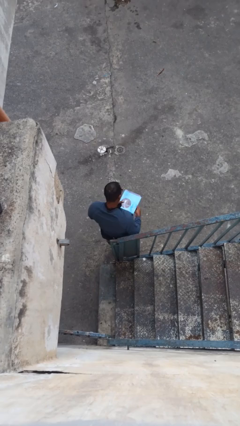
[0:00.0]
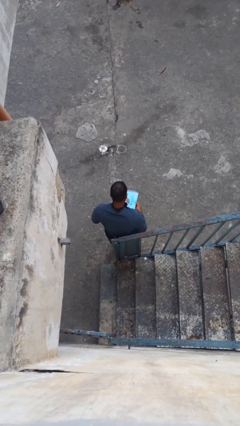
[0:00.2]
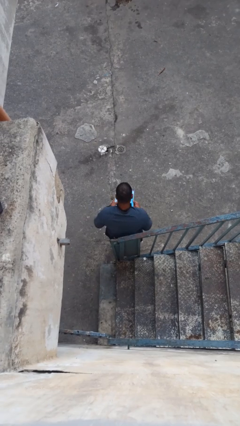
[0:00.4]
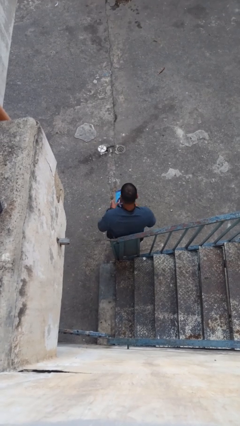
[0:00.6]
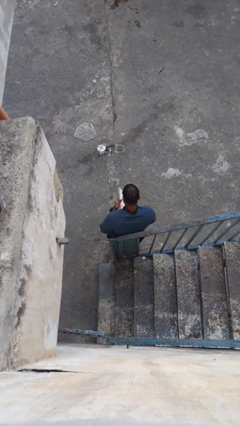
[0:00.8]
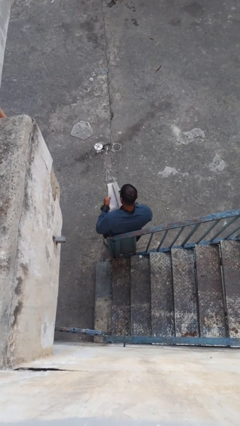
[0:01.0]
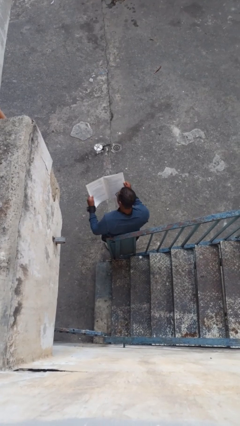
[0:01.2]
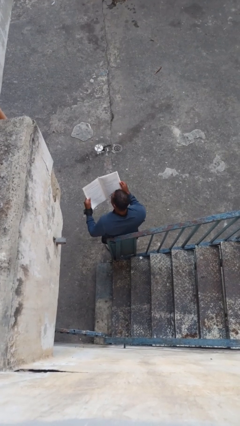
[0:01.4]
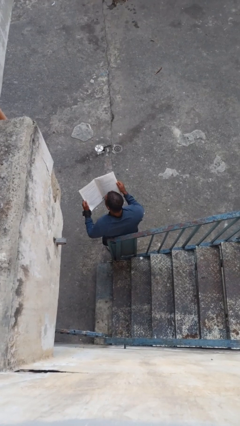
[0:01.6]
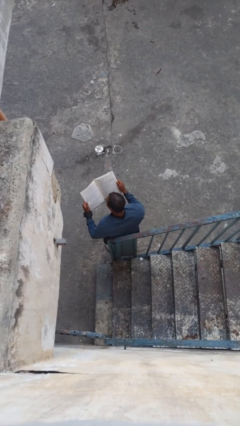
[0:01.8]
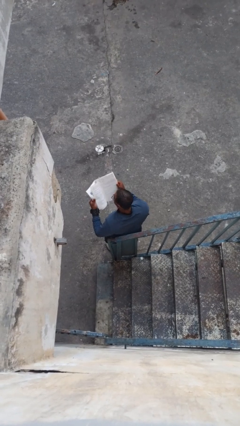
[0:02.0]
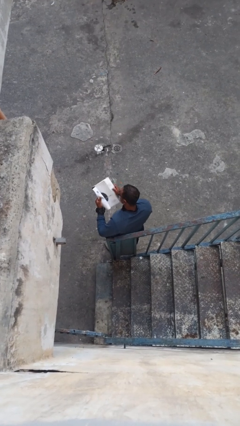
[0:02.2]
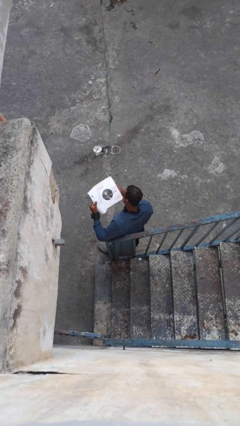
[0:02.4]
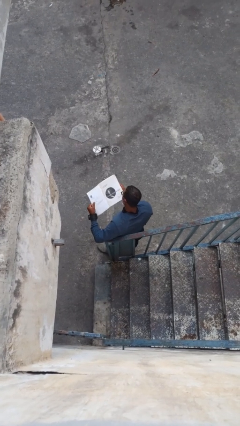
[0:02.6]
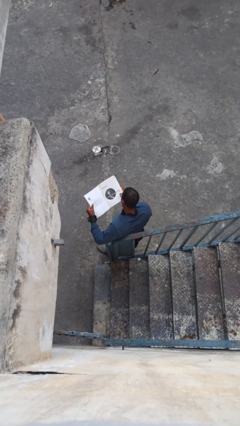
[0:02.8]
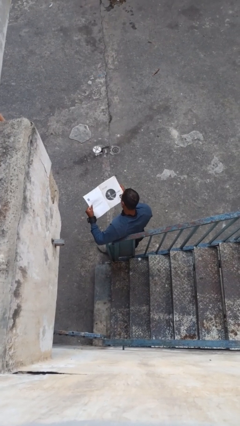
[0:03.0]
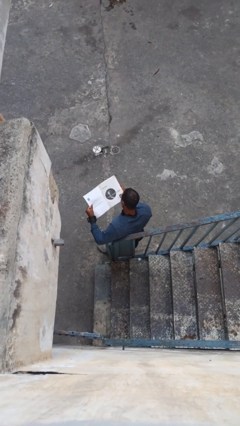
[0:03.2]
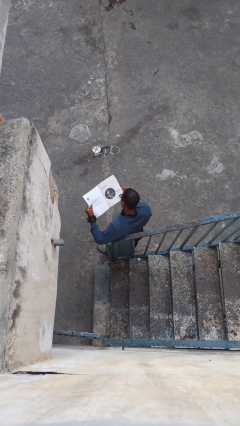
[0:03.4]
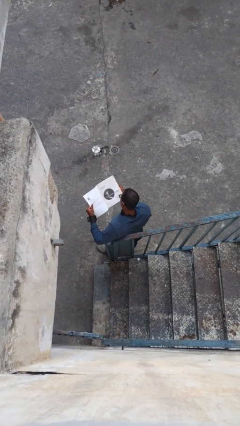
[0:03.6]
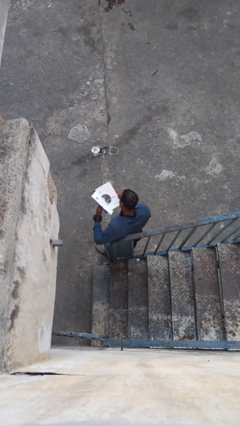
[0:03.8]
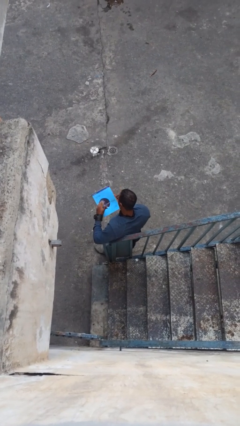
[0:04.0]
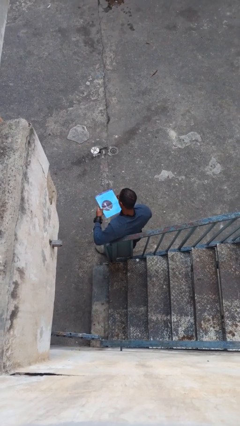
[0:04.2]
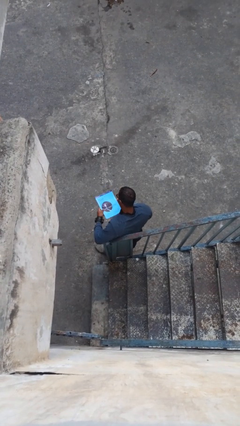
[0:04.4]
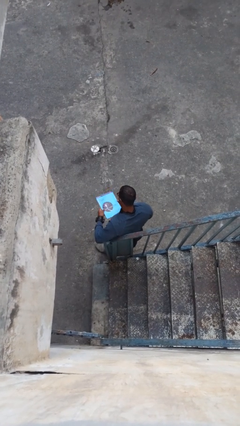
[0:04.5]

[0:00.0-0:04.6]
person reads document

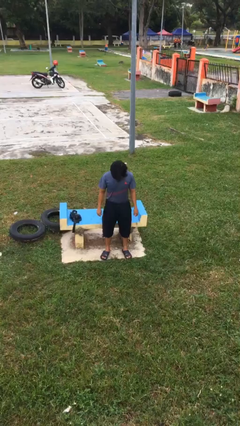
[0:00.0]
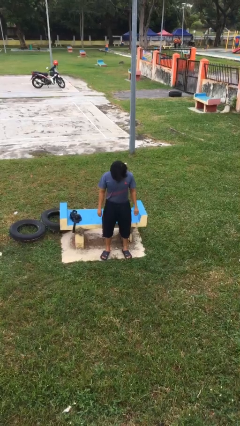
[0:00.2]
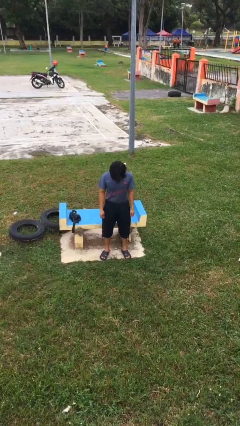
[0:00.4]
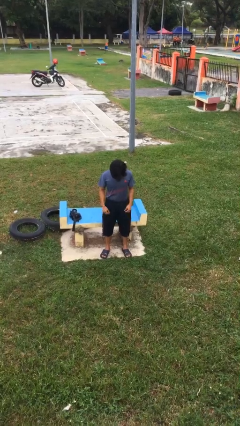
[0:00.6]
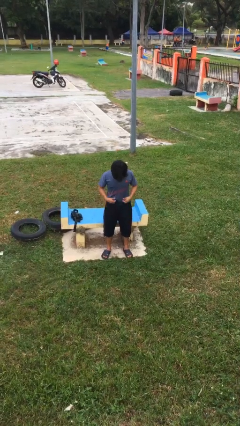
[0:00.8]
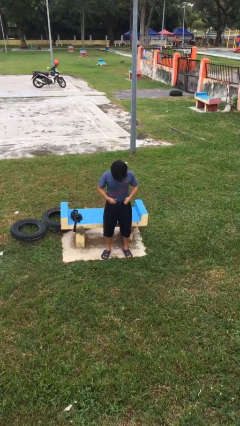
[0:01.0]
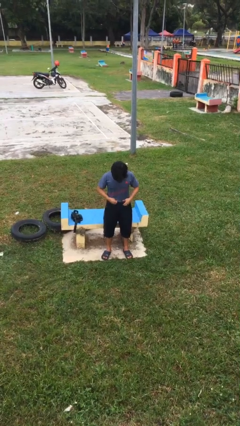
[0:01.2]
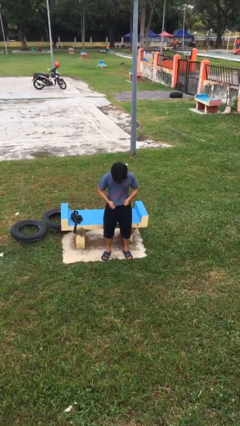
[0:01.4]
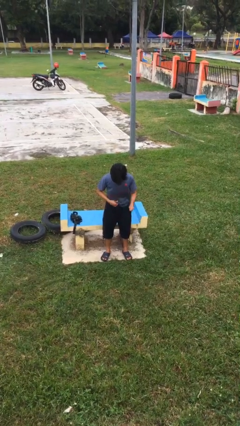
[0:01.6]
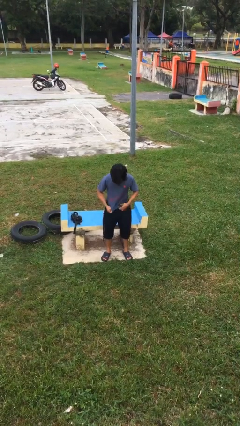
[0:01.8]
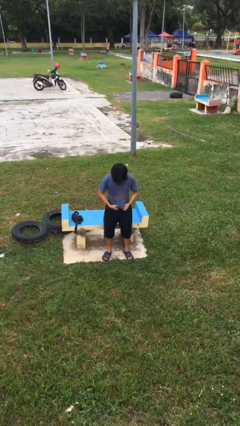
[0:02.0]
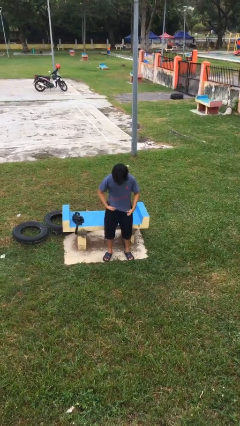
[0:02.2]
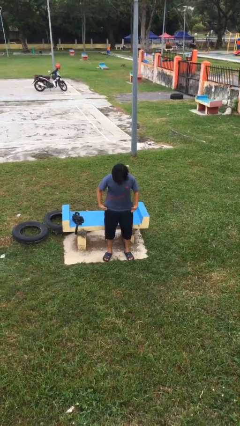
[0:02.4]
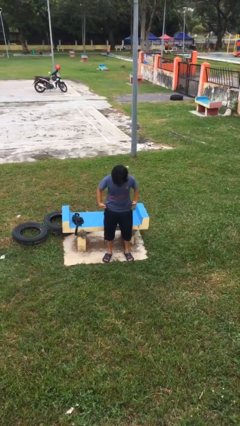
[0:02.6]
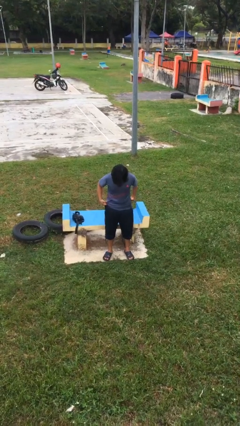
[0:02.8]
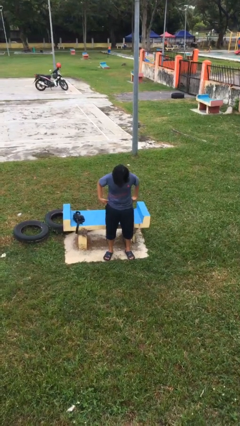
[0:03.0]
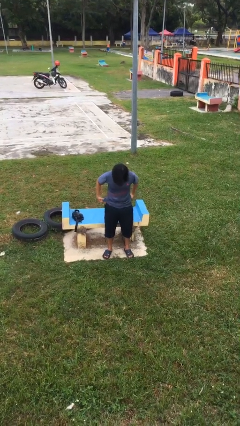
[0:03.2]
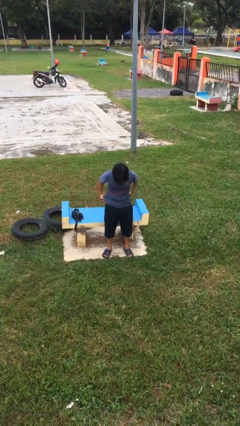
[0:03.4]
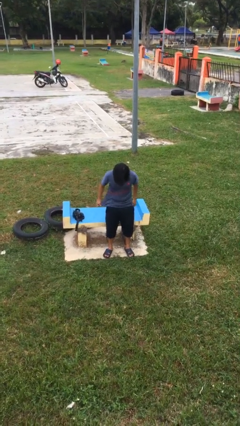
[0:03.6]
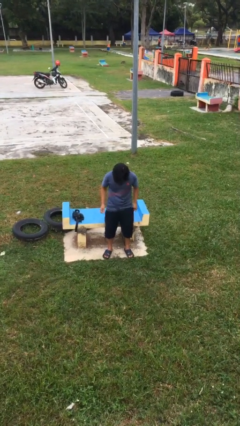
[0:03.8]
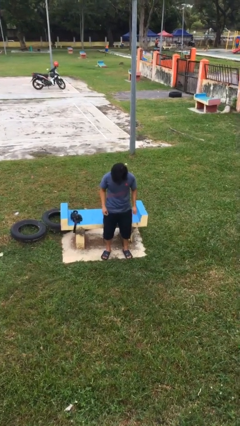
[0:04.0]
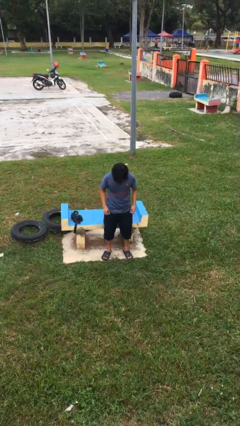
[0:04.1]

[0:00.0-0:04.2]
person untucks shirt

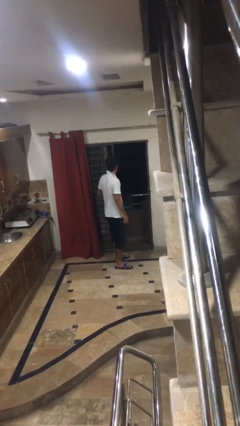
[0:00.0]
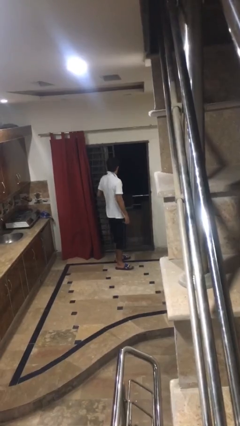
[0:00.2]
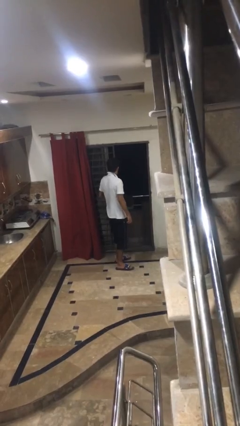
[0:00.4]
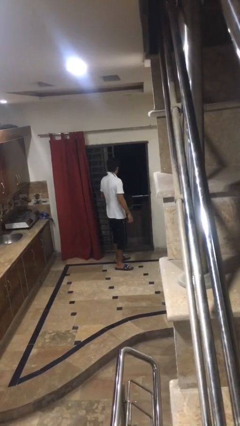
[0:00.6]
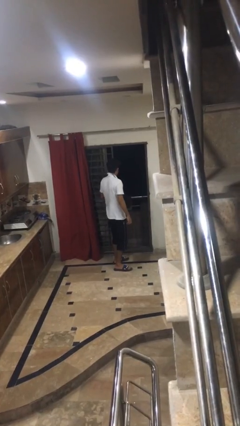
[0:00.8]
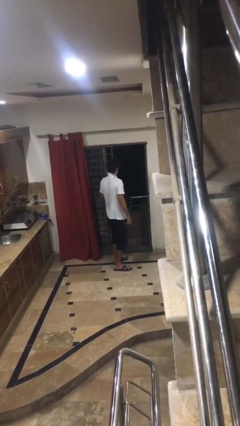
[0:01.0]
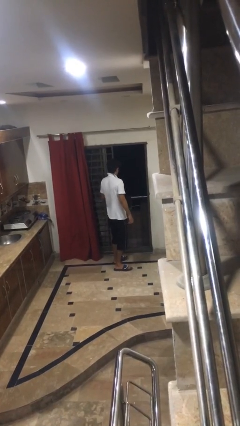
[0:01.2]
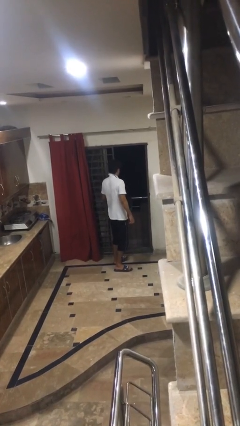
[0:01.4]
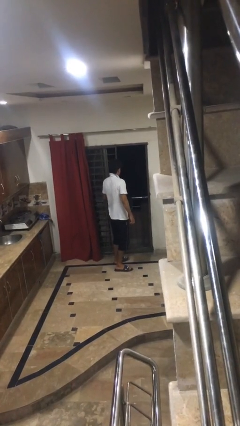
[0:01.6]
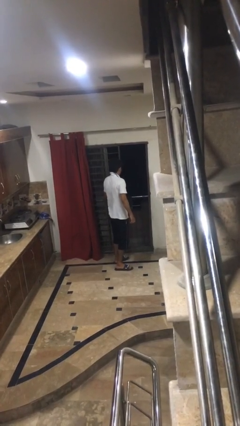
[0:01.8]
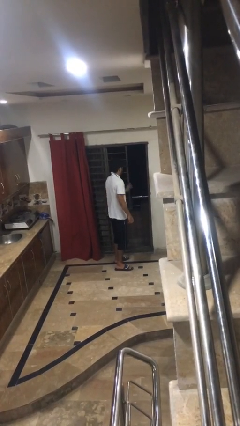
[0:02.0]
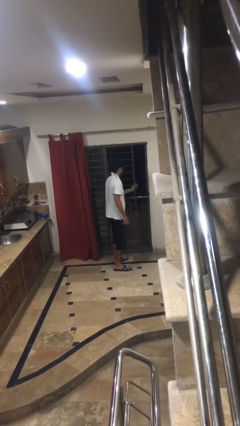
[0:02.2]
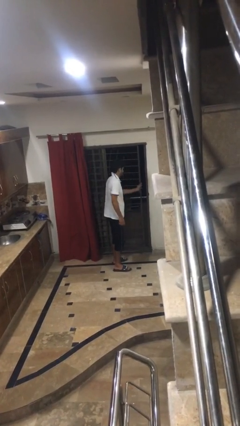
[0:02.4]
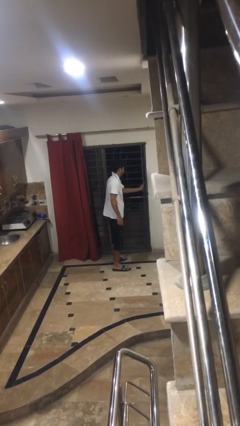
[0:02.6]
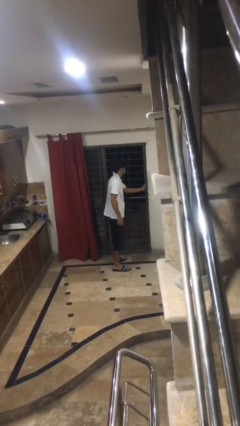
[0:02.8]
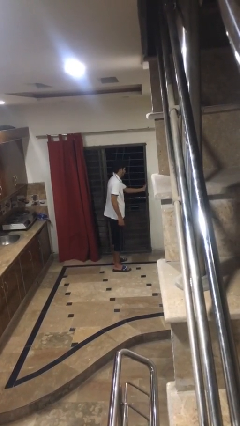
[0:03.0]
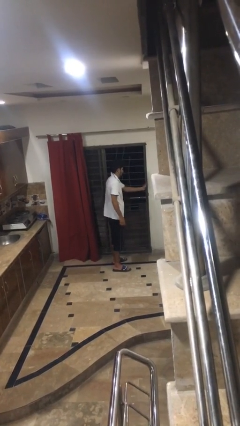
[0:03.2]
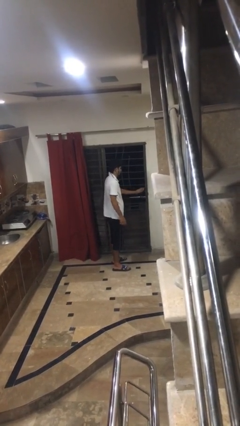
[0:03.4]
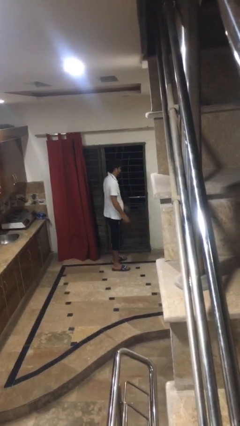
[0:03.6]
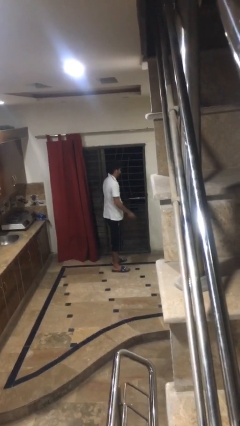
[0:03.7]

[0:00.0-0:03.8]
person closes facility door

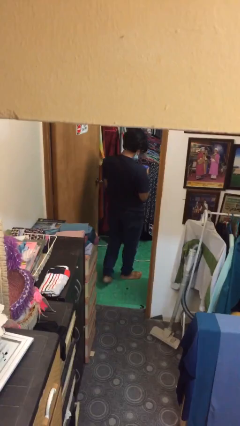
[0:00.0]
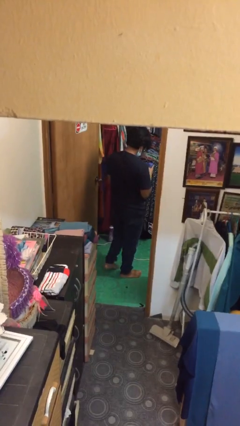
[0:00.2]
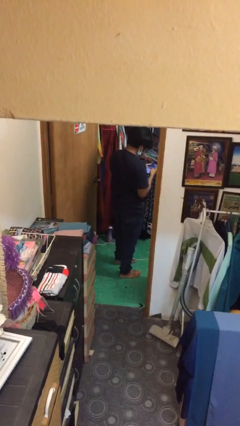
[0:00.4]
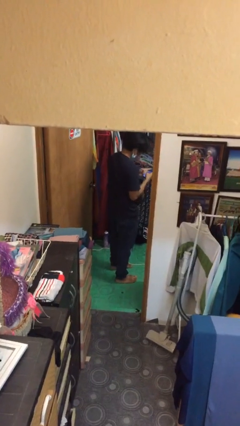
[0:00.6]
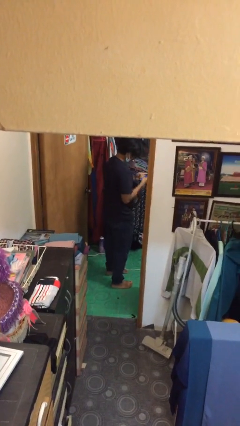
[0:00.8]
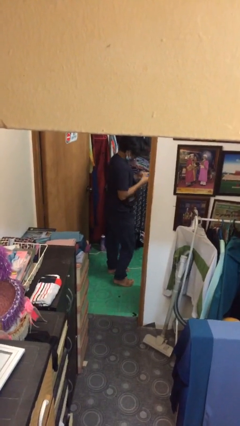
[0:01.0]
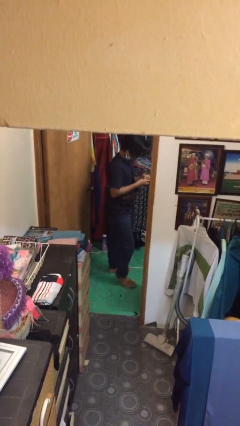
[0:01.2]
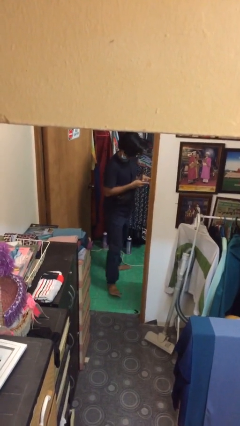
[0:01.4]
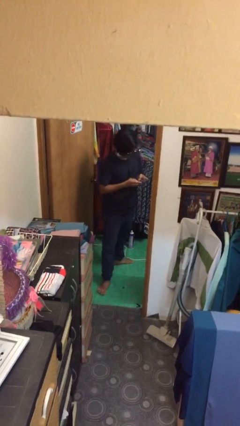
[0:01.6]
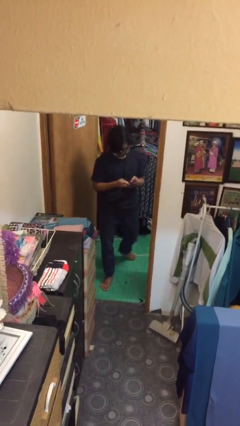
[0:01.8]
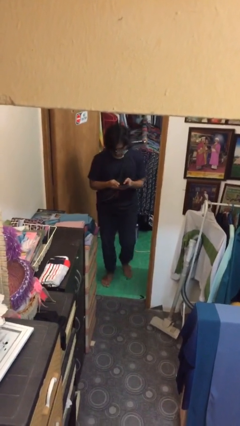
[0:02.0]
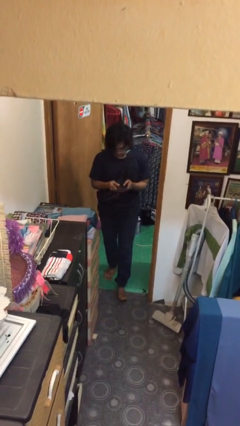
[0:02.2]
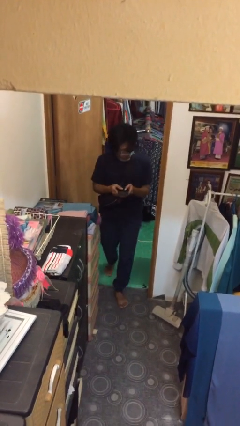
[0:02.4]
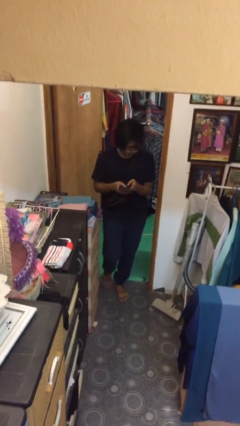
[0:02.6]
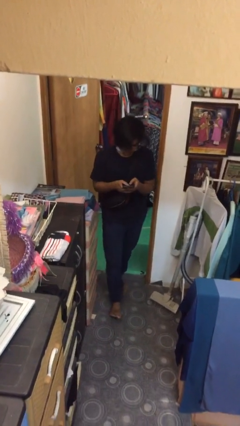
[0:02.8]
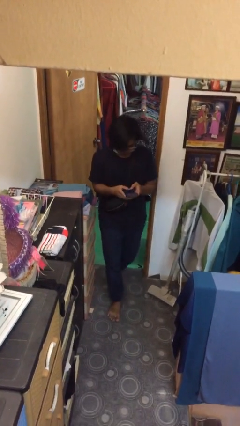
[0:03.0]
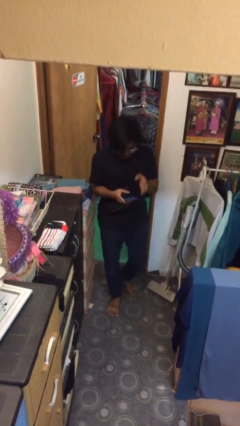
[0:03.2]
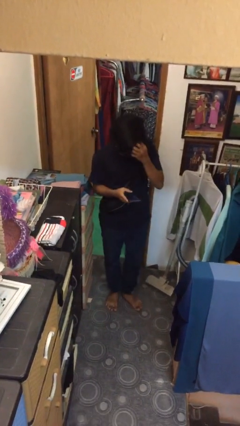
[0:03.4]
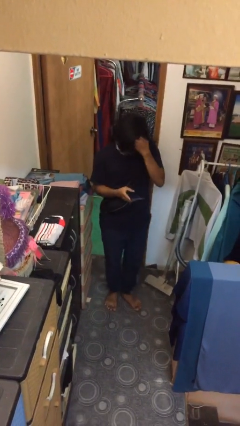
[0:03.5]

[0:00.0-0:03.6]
person enters scene through structure

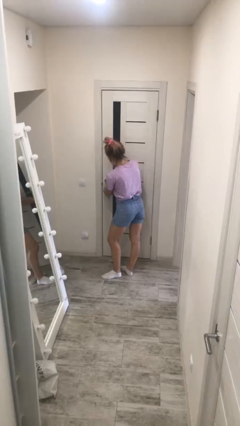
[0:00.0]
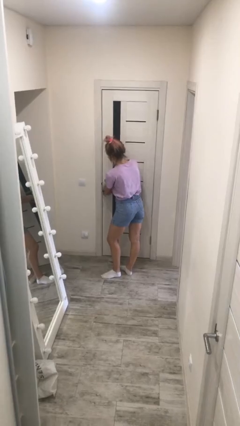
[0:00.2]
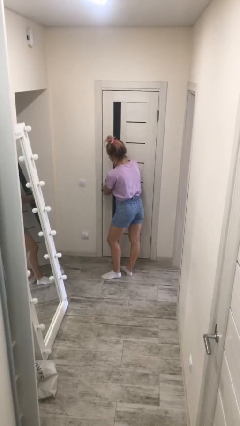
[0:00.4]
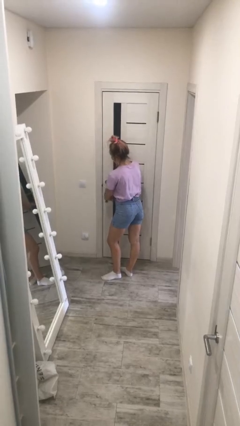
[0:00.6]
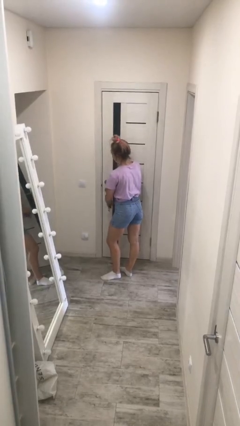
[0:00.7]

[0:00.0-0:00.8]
person locks door with keys

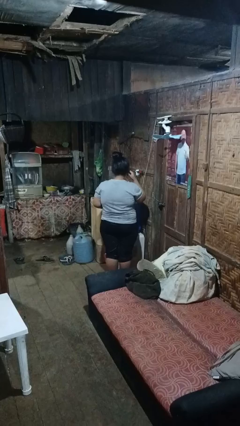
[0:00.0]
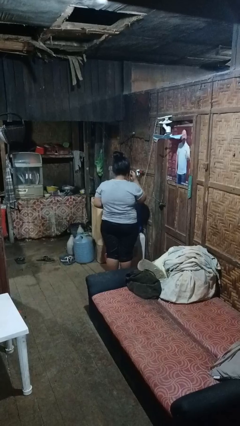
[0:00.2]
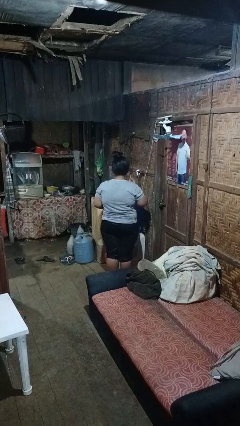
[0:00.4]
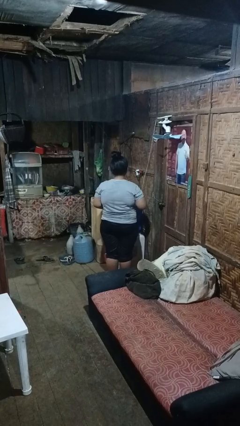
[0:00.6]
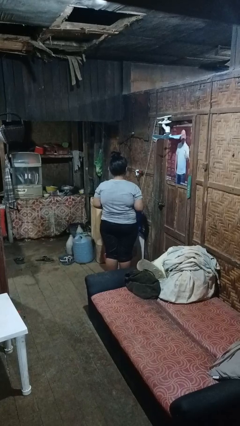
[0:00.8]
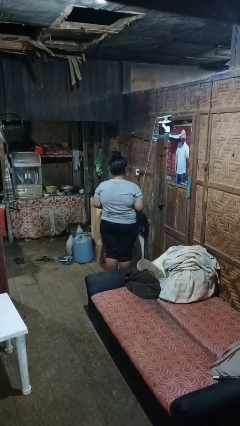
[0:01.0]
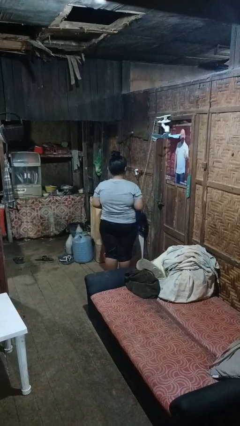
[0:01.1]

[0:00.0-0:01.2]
person takes off headphones
